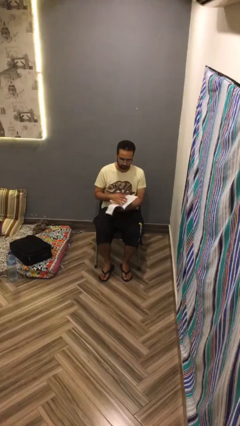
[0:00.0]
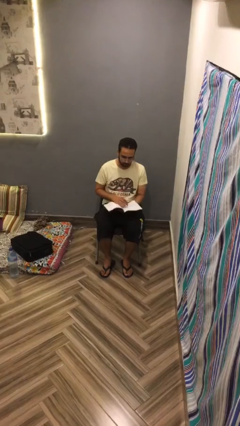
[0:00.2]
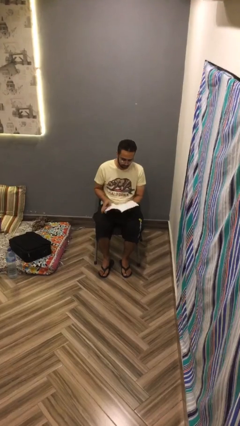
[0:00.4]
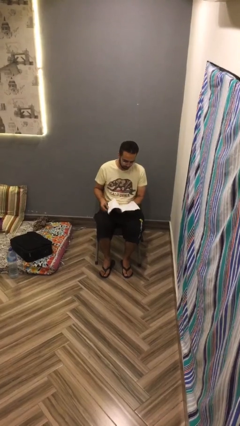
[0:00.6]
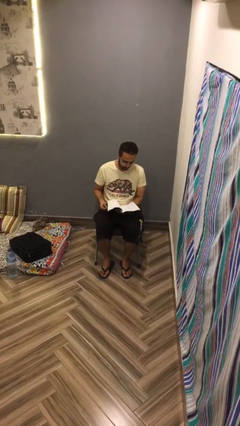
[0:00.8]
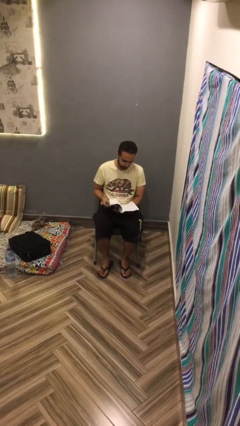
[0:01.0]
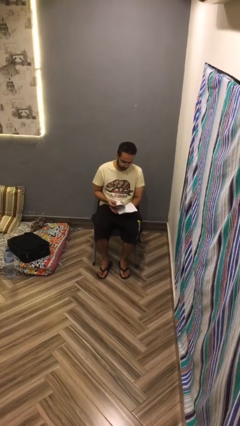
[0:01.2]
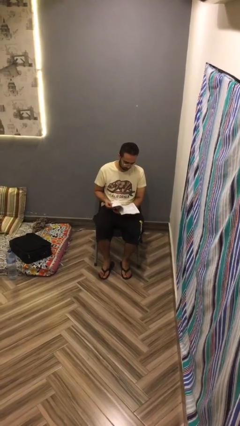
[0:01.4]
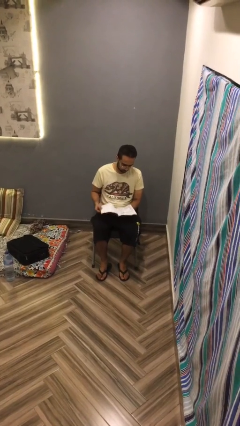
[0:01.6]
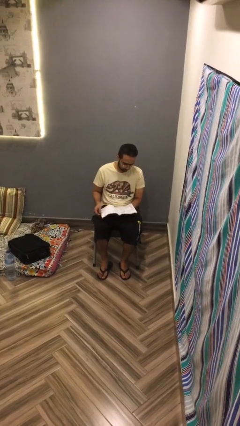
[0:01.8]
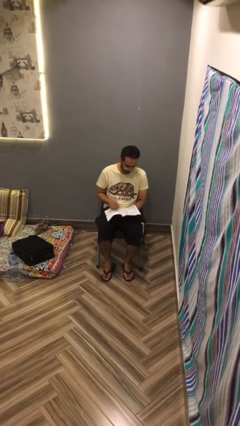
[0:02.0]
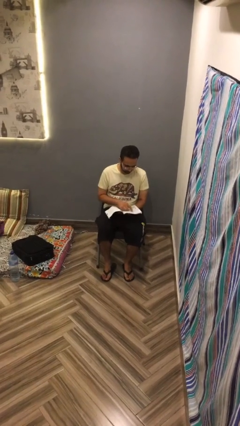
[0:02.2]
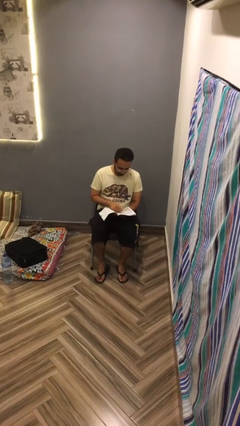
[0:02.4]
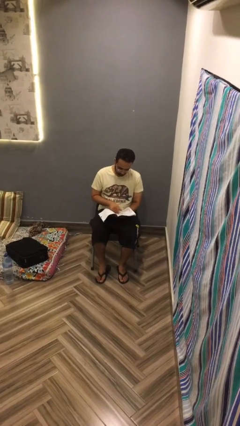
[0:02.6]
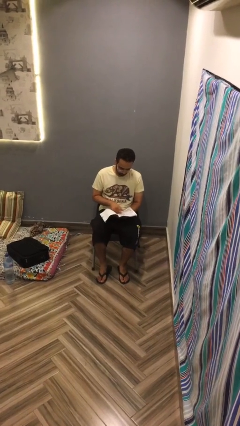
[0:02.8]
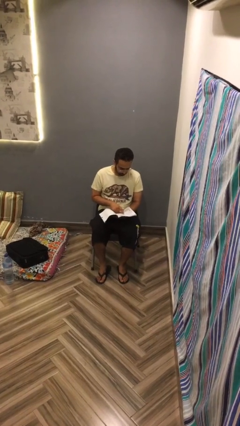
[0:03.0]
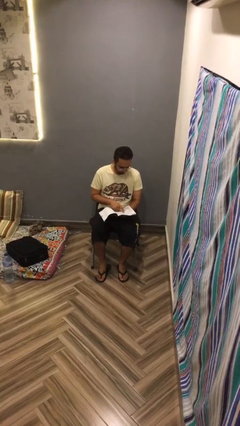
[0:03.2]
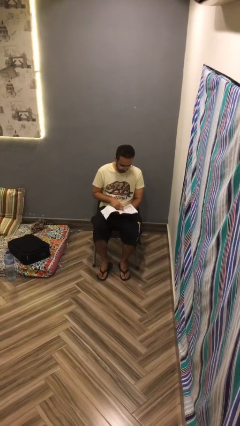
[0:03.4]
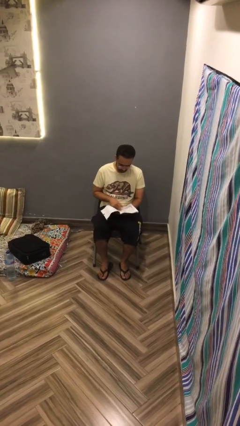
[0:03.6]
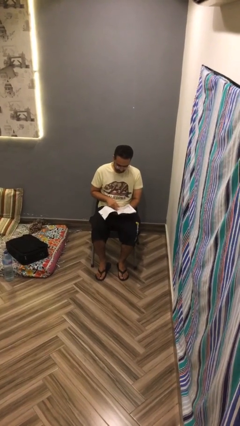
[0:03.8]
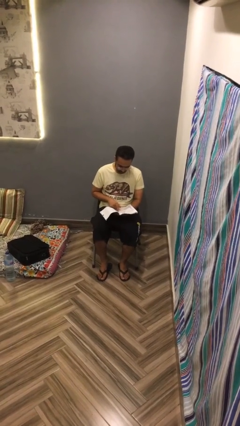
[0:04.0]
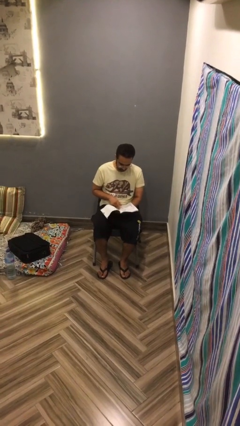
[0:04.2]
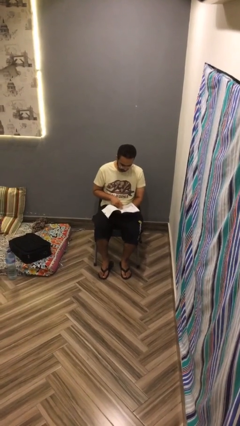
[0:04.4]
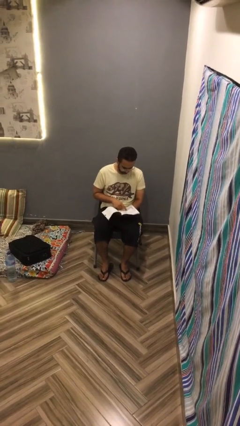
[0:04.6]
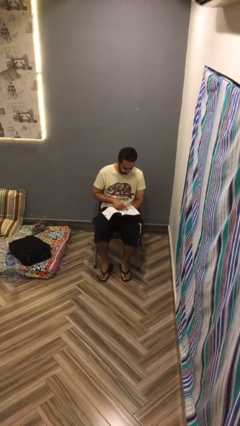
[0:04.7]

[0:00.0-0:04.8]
person reads document

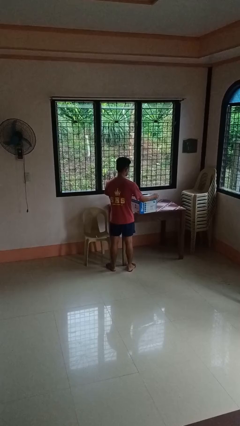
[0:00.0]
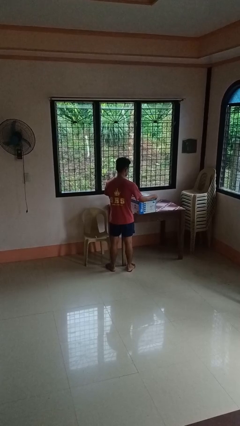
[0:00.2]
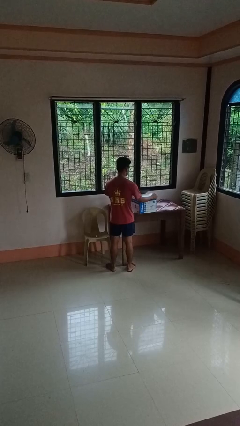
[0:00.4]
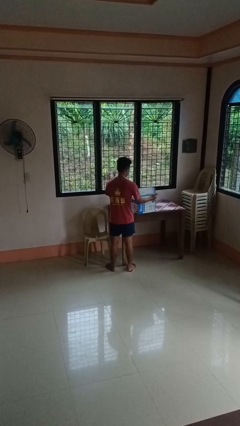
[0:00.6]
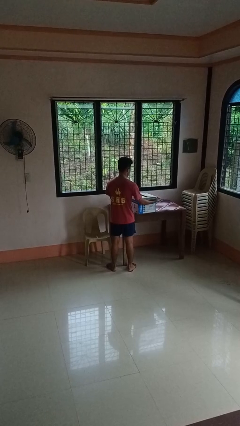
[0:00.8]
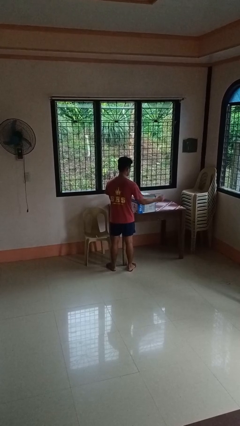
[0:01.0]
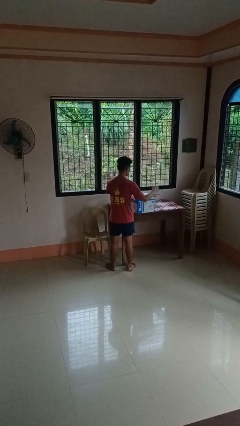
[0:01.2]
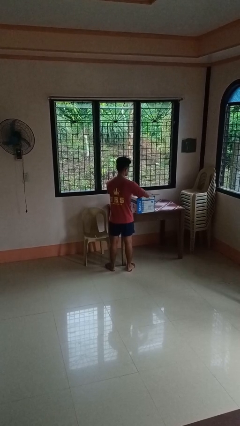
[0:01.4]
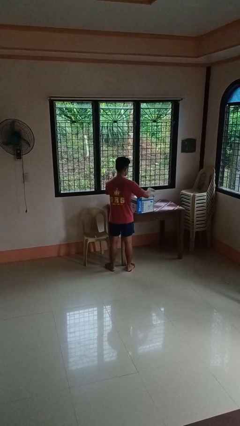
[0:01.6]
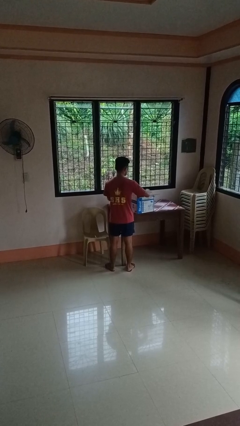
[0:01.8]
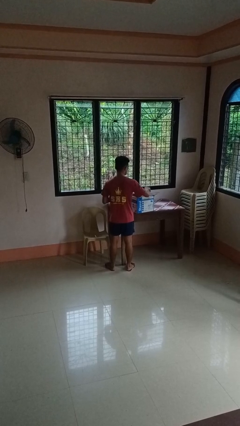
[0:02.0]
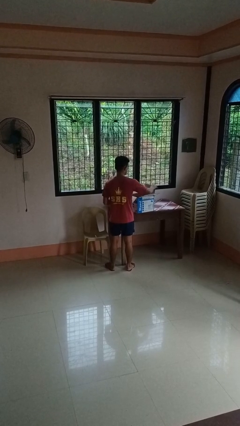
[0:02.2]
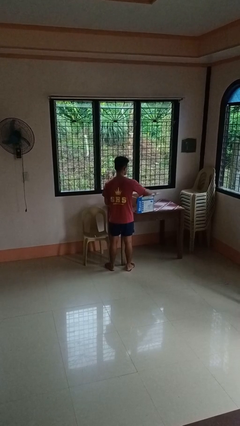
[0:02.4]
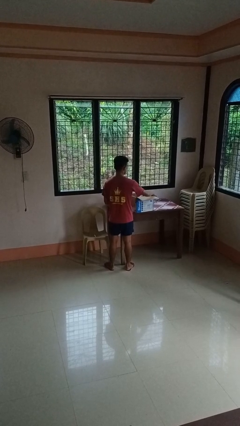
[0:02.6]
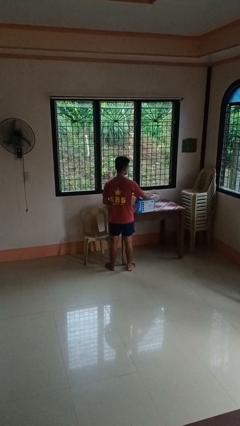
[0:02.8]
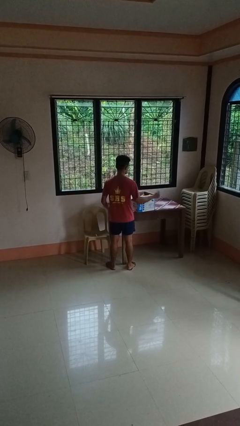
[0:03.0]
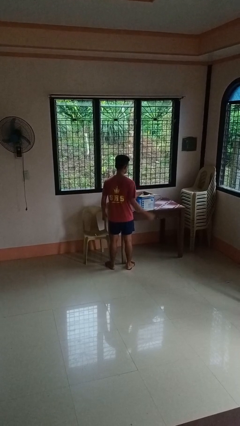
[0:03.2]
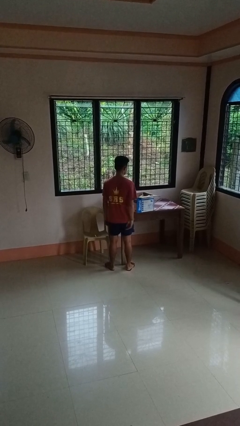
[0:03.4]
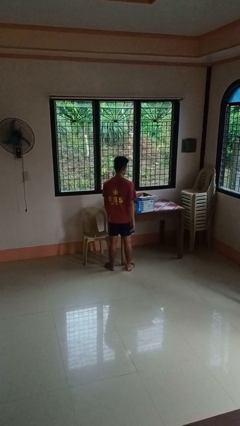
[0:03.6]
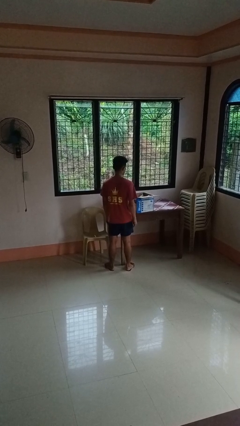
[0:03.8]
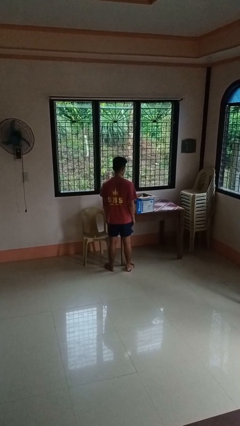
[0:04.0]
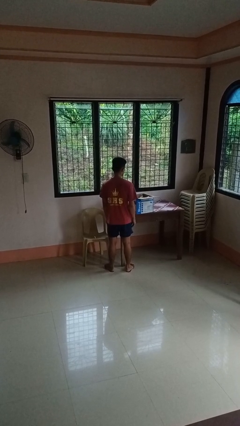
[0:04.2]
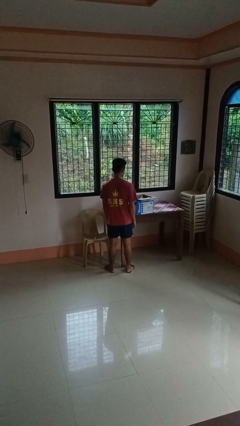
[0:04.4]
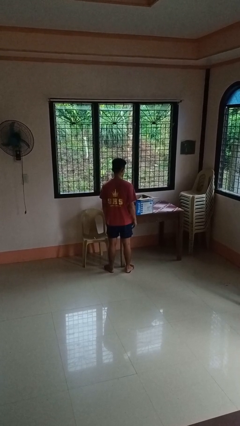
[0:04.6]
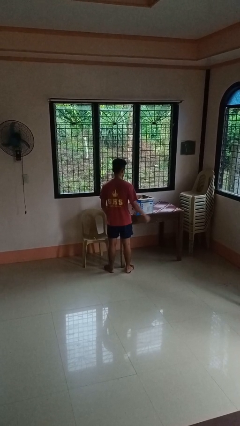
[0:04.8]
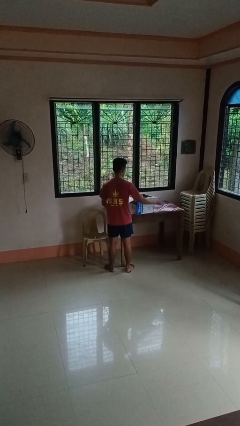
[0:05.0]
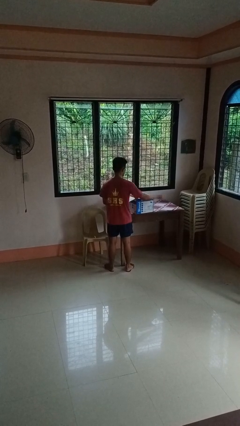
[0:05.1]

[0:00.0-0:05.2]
person opens box

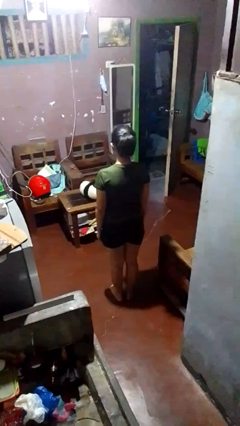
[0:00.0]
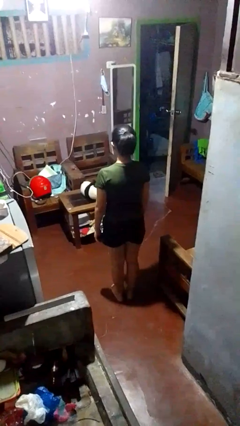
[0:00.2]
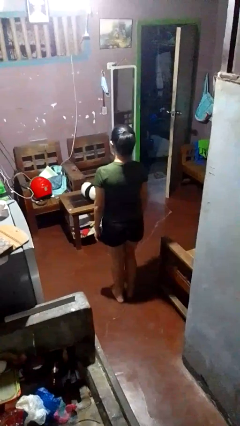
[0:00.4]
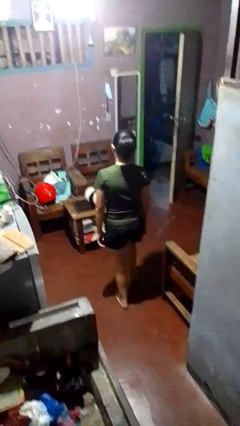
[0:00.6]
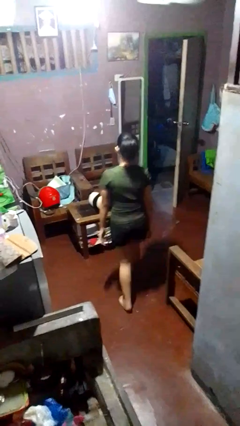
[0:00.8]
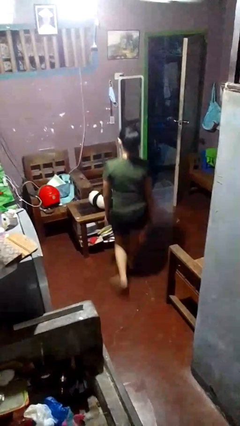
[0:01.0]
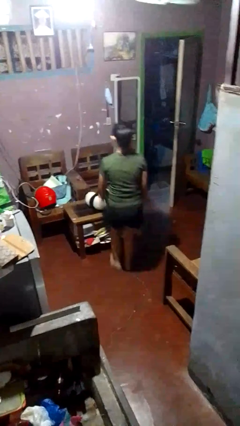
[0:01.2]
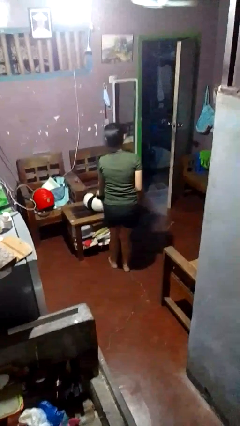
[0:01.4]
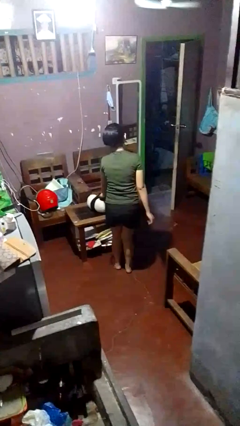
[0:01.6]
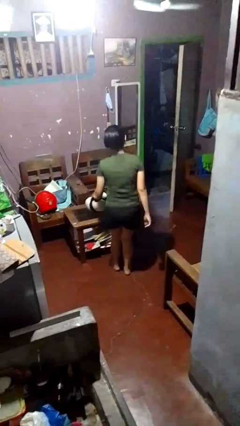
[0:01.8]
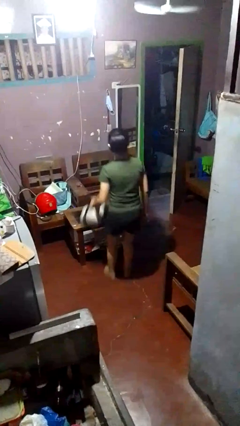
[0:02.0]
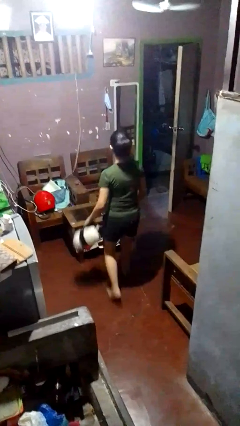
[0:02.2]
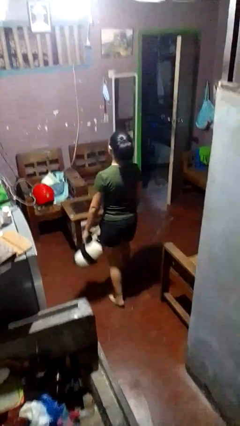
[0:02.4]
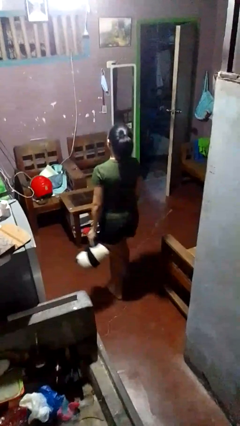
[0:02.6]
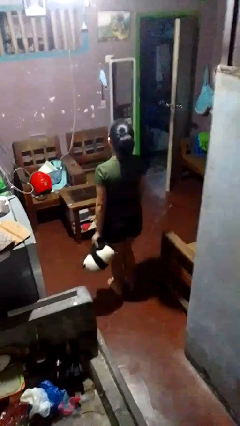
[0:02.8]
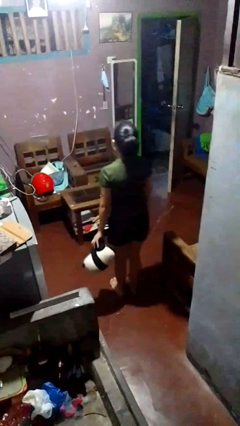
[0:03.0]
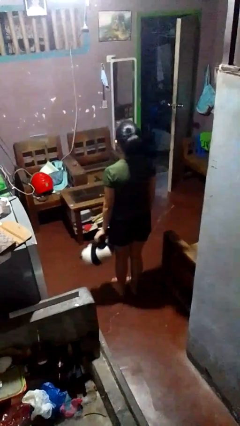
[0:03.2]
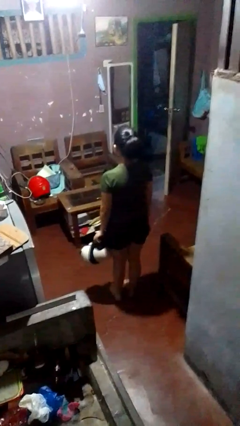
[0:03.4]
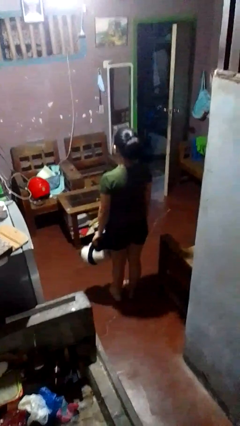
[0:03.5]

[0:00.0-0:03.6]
person picks up object from table

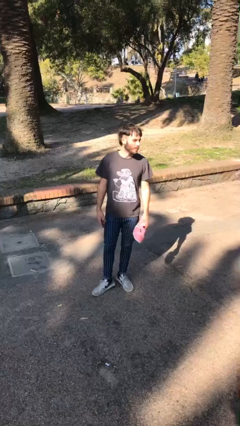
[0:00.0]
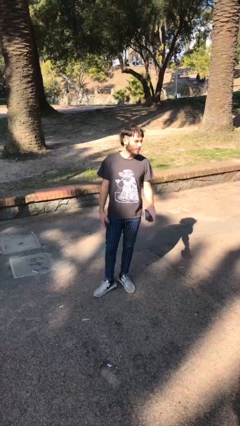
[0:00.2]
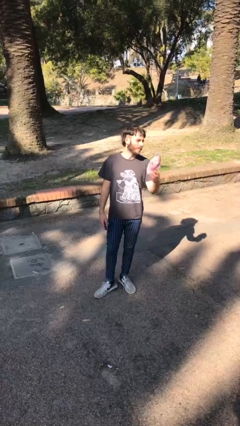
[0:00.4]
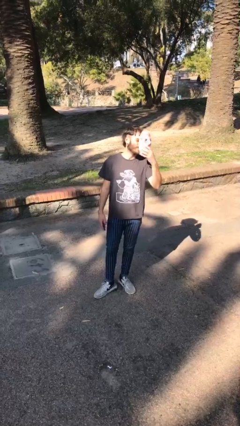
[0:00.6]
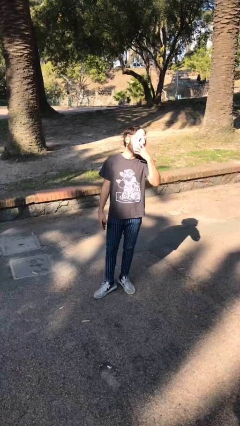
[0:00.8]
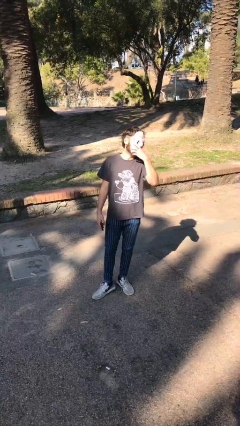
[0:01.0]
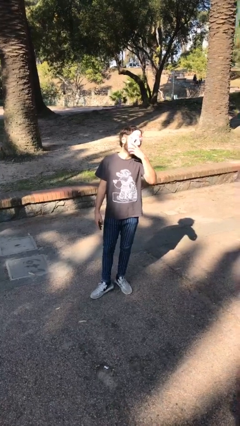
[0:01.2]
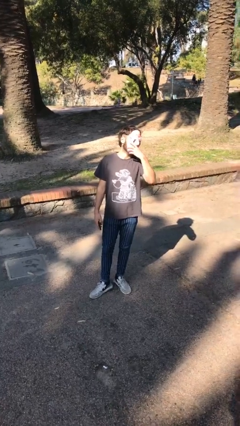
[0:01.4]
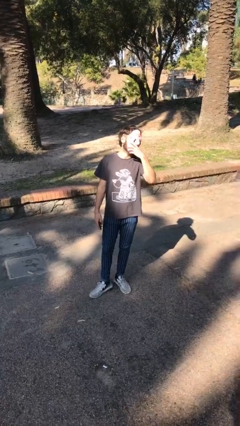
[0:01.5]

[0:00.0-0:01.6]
person puts on facemask

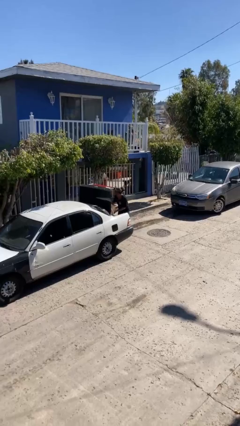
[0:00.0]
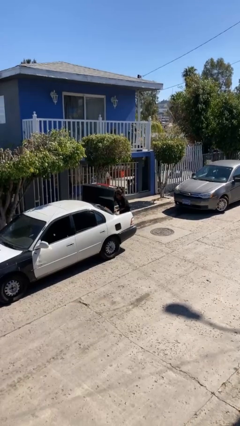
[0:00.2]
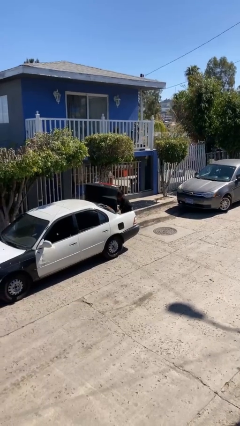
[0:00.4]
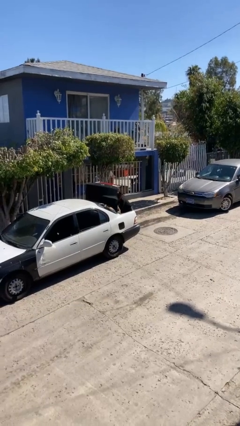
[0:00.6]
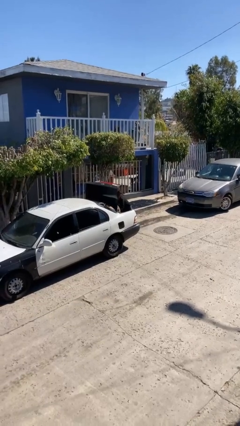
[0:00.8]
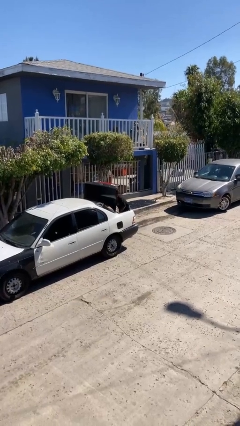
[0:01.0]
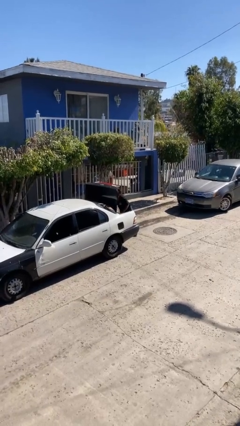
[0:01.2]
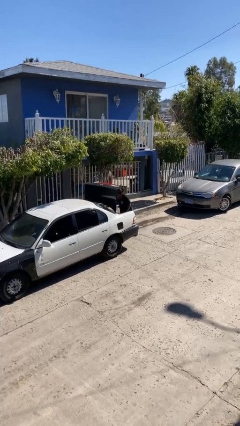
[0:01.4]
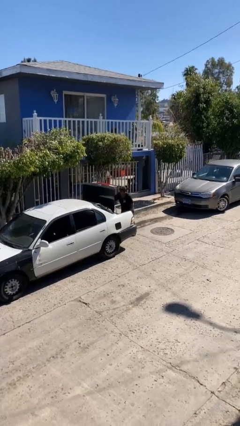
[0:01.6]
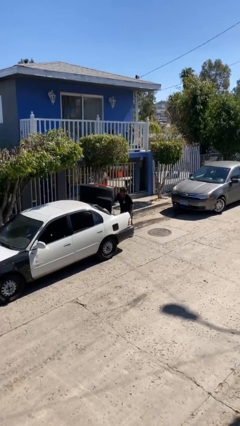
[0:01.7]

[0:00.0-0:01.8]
person loads car

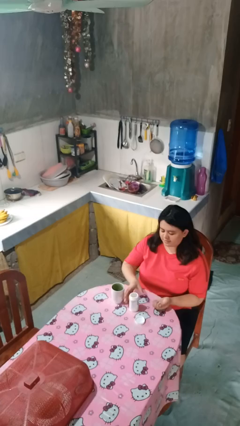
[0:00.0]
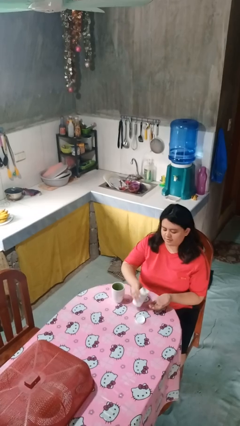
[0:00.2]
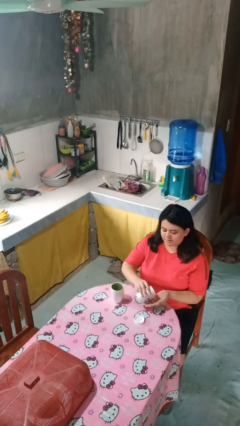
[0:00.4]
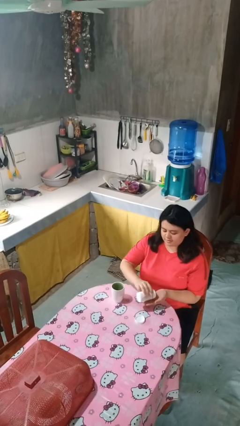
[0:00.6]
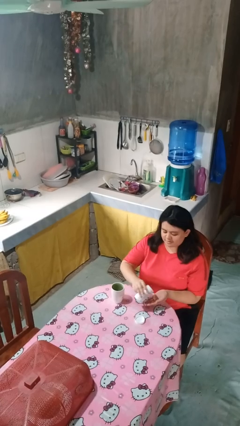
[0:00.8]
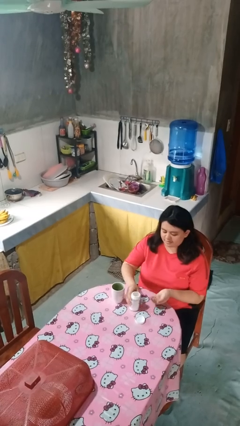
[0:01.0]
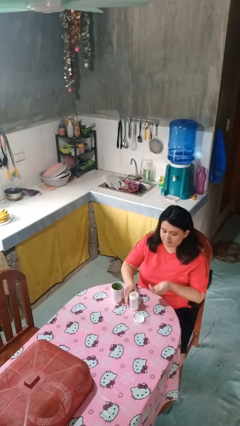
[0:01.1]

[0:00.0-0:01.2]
person takes medicine pills
